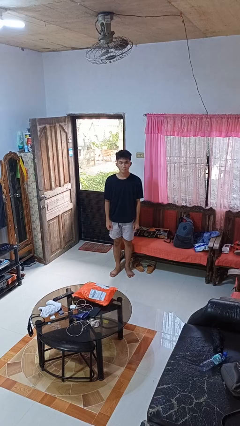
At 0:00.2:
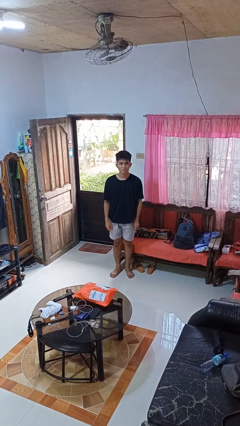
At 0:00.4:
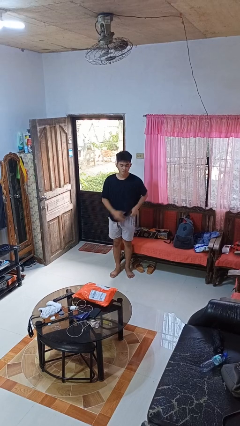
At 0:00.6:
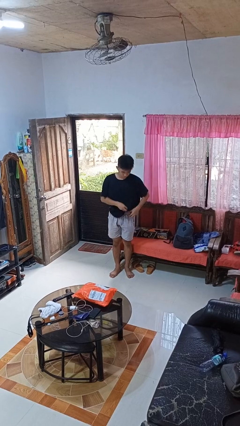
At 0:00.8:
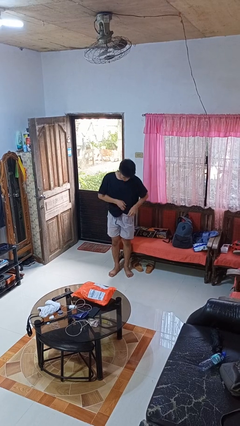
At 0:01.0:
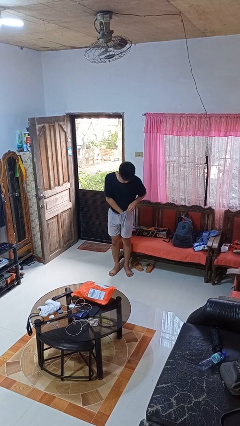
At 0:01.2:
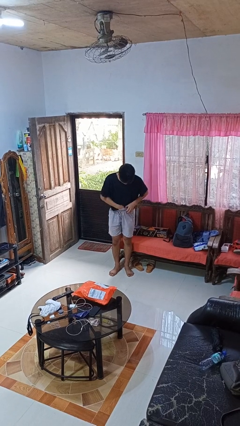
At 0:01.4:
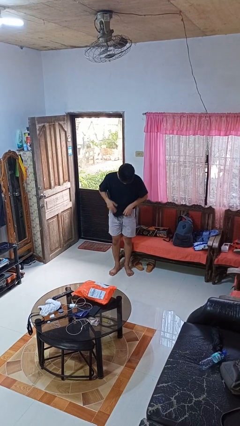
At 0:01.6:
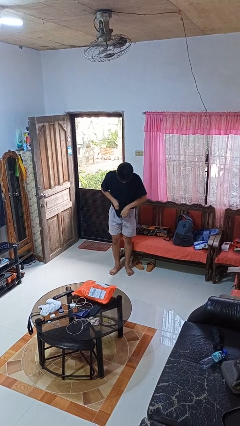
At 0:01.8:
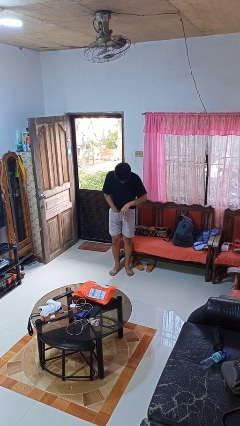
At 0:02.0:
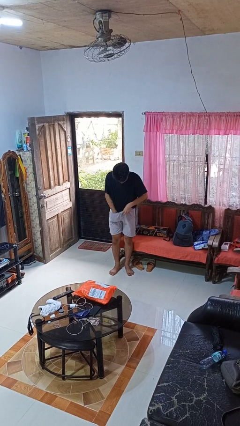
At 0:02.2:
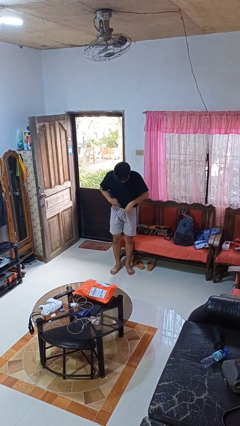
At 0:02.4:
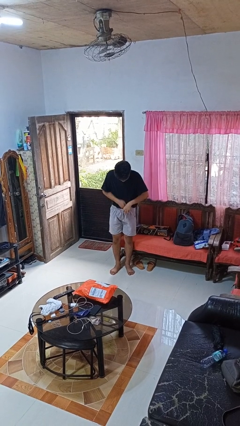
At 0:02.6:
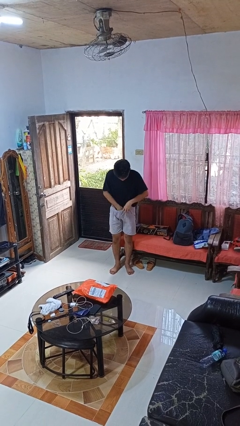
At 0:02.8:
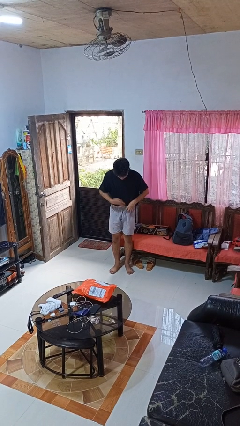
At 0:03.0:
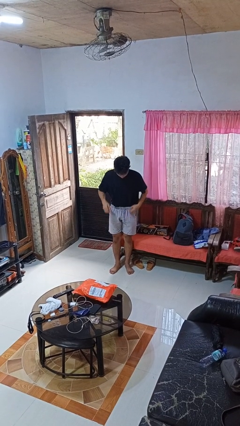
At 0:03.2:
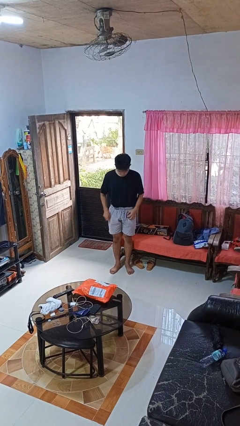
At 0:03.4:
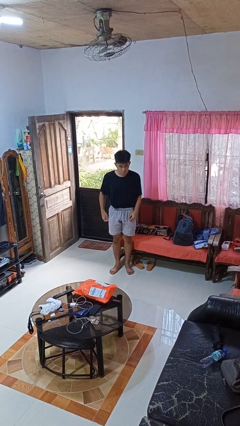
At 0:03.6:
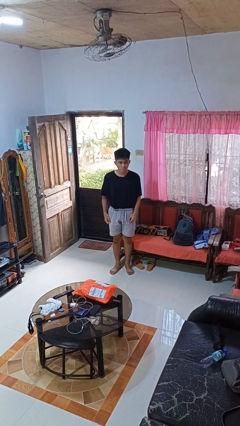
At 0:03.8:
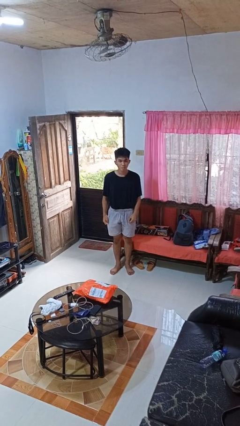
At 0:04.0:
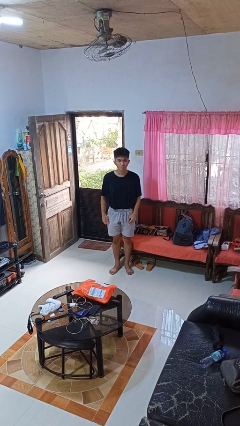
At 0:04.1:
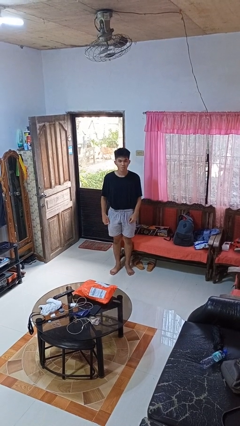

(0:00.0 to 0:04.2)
person tucks in shirt

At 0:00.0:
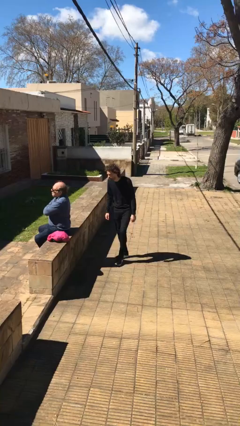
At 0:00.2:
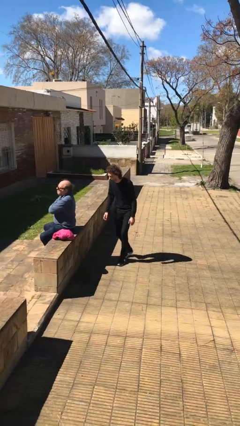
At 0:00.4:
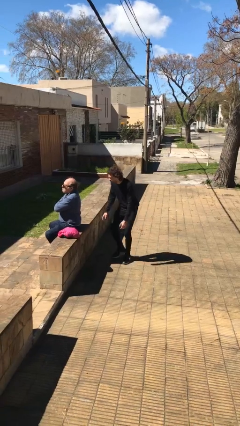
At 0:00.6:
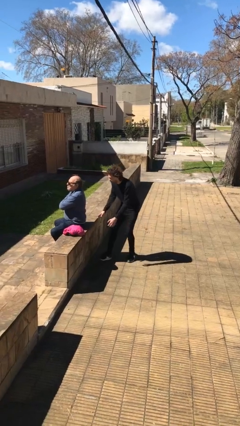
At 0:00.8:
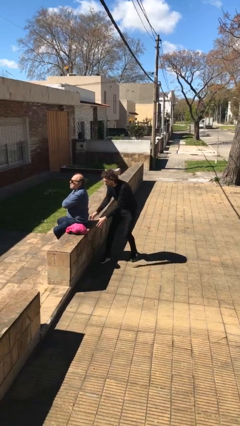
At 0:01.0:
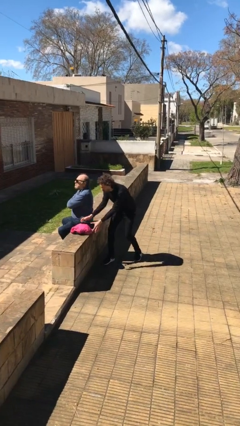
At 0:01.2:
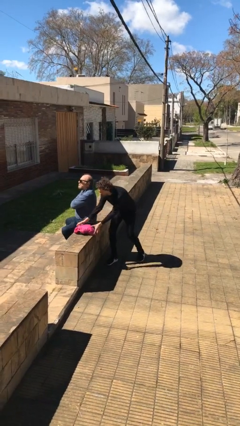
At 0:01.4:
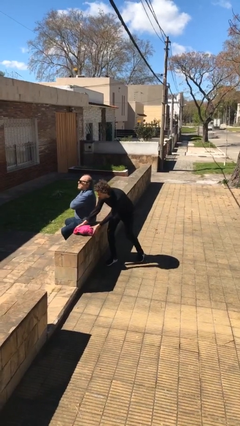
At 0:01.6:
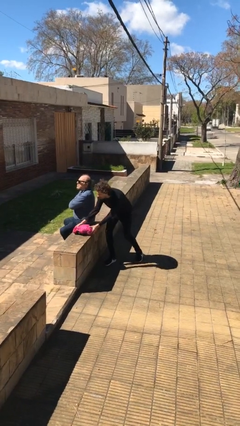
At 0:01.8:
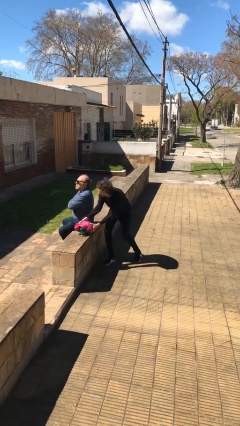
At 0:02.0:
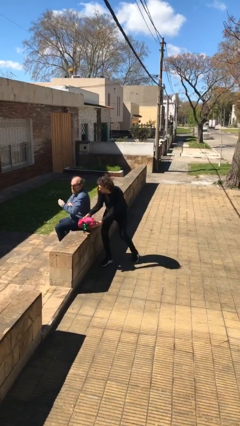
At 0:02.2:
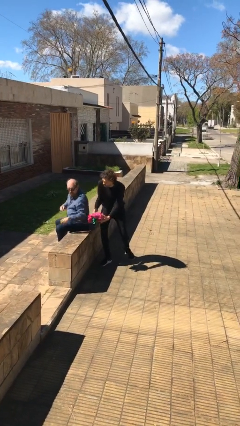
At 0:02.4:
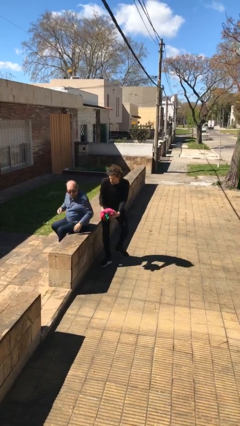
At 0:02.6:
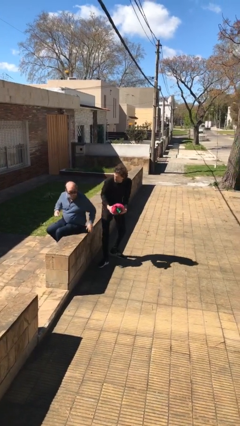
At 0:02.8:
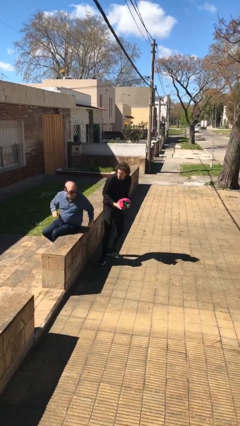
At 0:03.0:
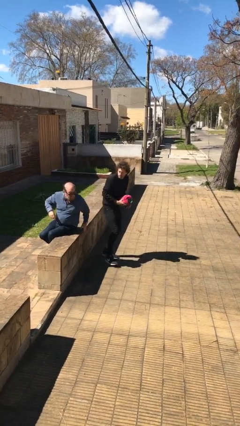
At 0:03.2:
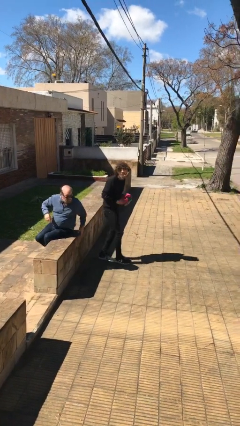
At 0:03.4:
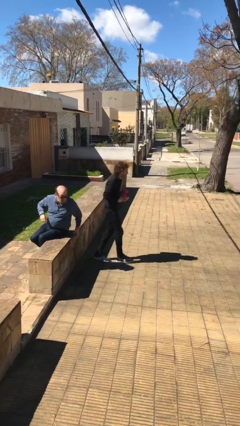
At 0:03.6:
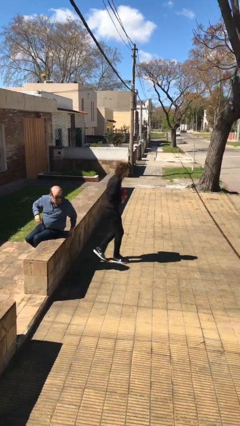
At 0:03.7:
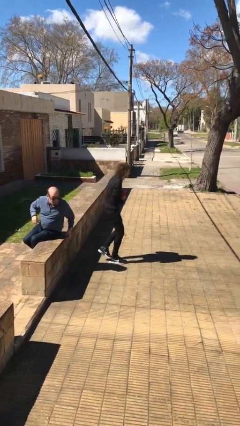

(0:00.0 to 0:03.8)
person steals object from person

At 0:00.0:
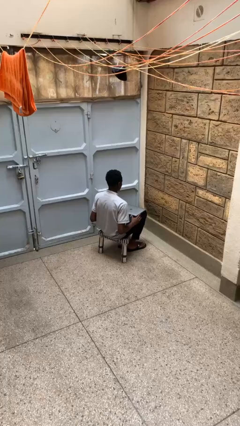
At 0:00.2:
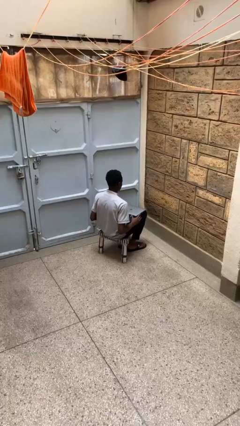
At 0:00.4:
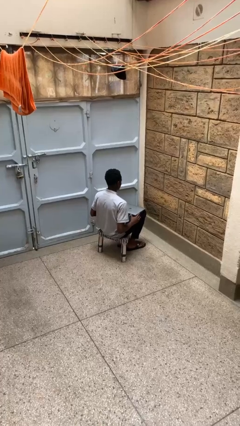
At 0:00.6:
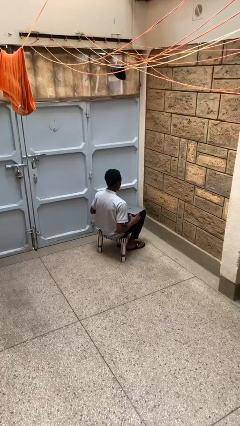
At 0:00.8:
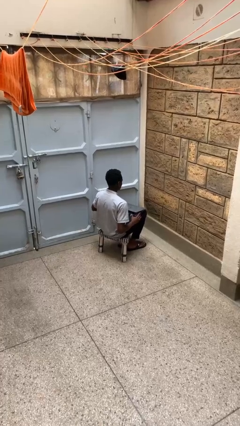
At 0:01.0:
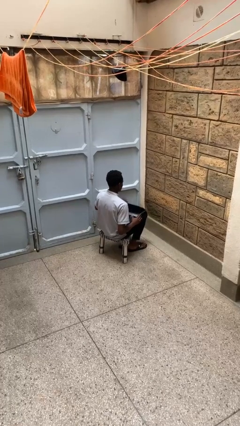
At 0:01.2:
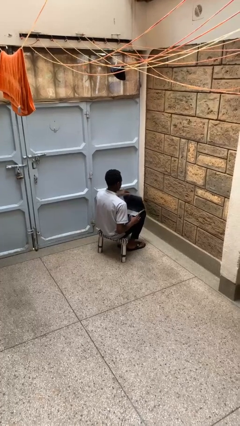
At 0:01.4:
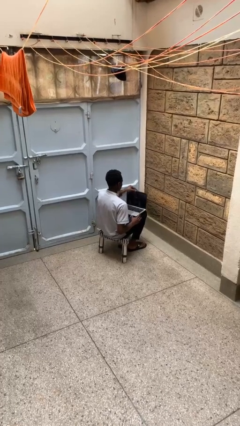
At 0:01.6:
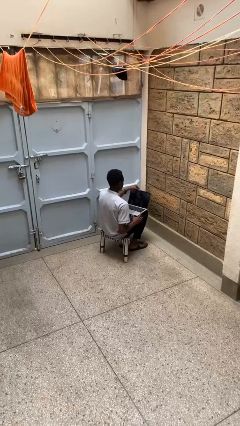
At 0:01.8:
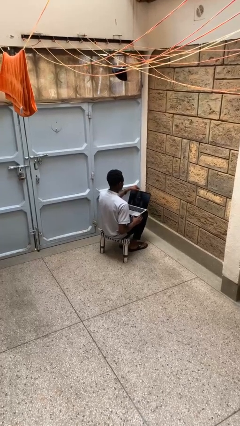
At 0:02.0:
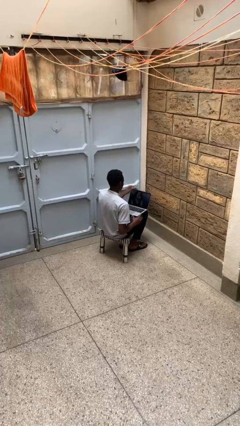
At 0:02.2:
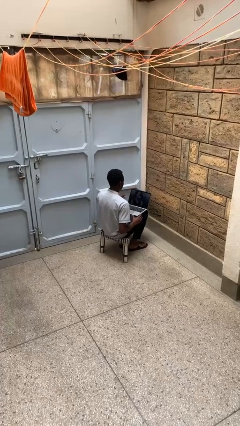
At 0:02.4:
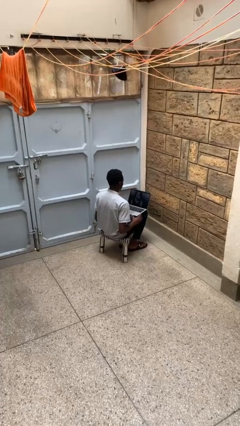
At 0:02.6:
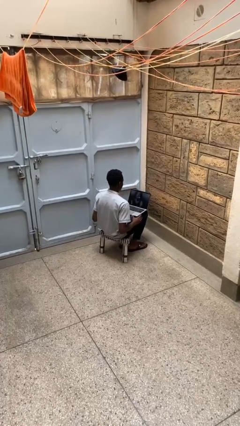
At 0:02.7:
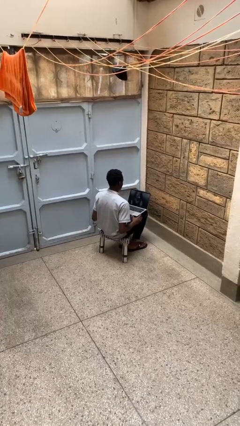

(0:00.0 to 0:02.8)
person opens laptop

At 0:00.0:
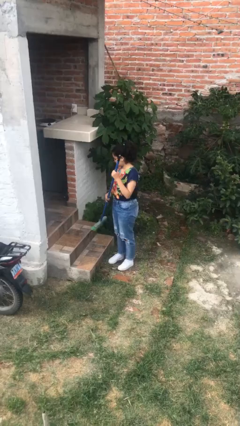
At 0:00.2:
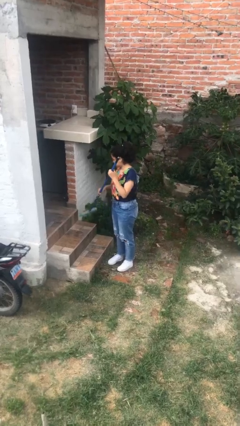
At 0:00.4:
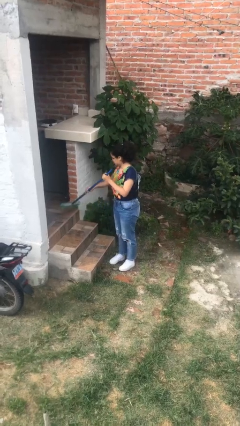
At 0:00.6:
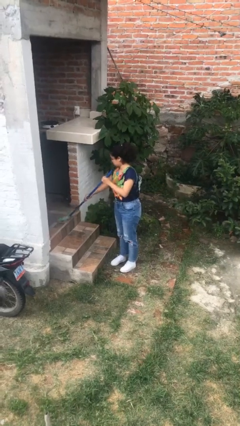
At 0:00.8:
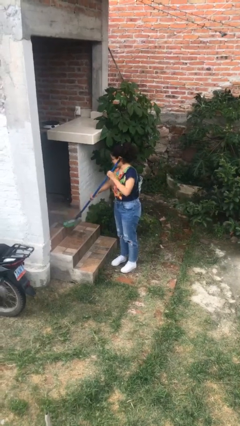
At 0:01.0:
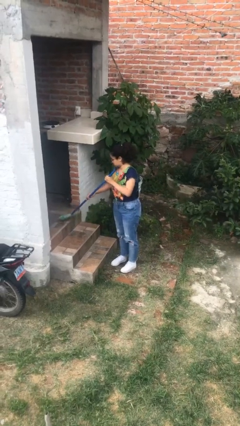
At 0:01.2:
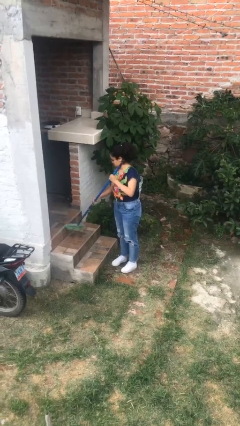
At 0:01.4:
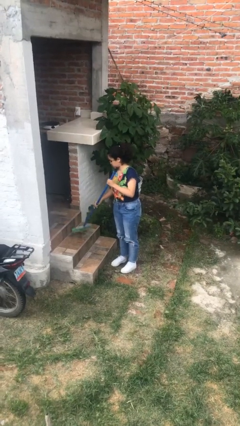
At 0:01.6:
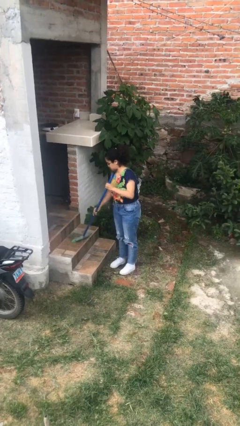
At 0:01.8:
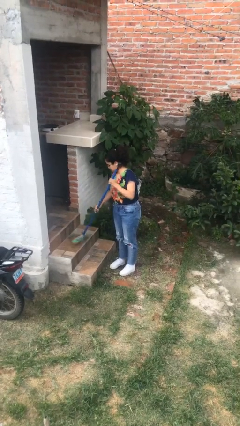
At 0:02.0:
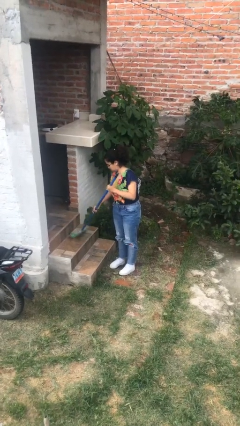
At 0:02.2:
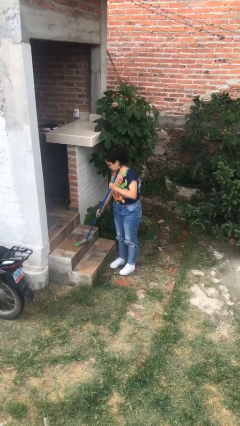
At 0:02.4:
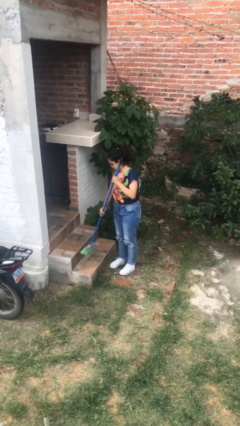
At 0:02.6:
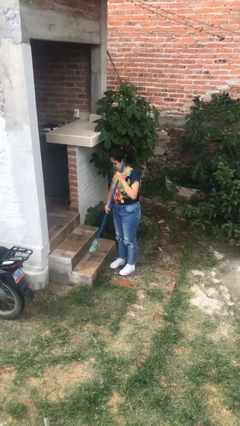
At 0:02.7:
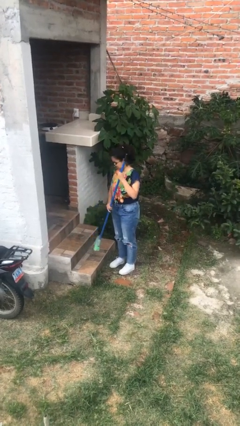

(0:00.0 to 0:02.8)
person sweeps floor

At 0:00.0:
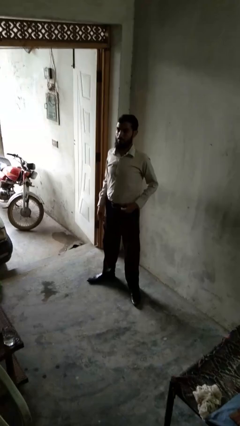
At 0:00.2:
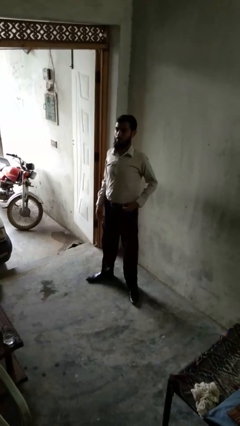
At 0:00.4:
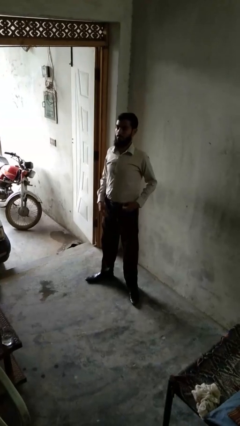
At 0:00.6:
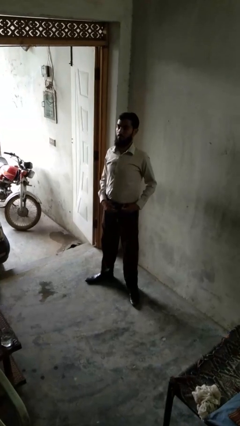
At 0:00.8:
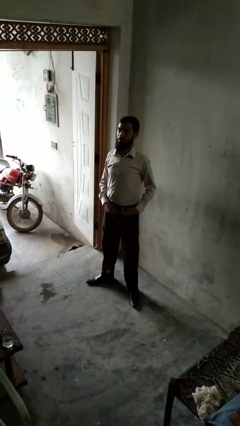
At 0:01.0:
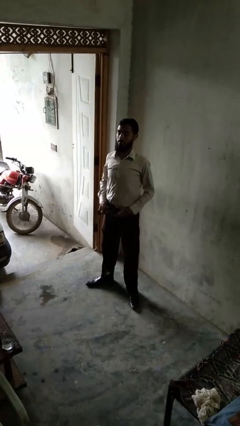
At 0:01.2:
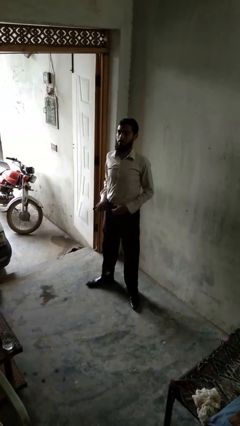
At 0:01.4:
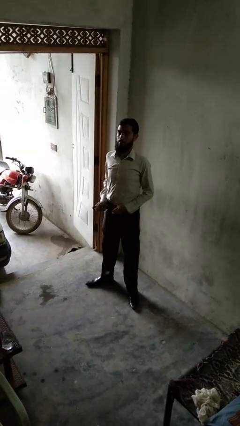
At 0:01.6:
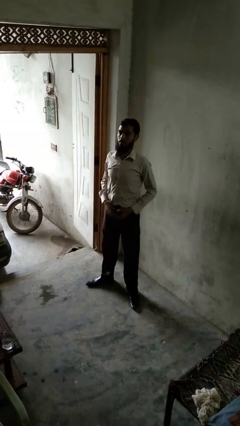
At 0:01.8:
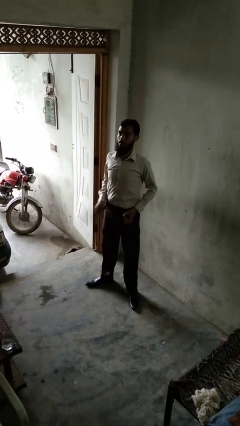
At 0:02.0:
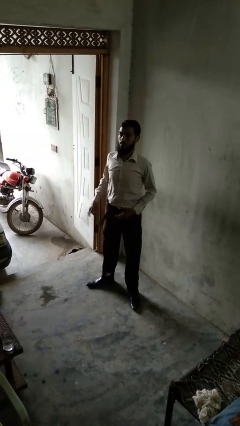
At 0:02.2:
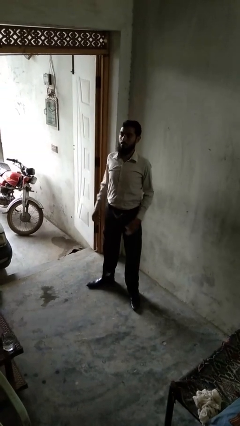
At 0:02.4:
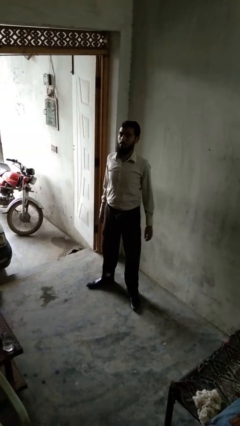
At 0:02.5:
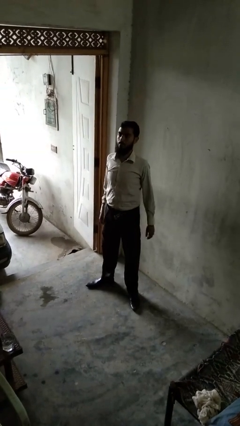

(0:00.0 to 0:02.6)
person takes off belt

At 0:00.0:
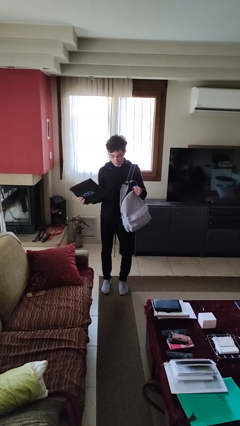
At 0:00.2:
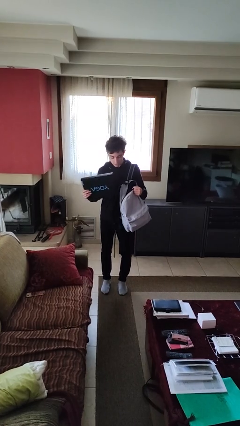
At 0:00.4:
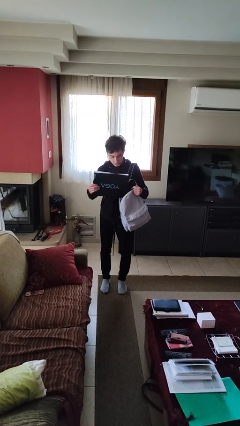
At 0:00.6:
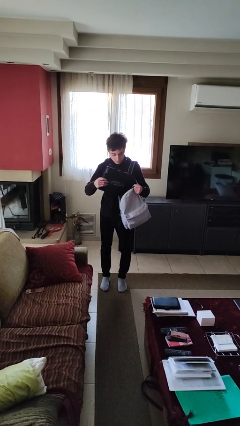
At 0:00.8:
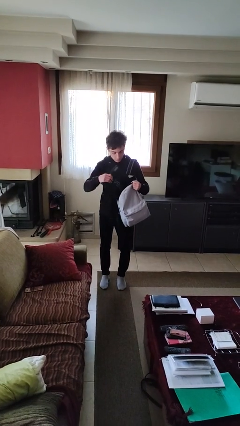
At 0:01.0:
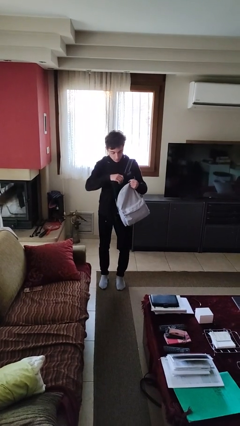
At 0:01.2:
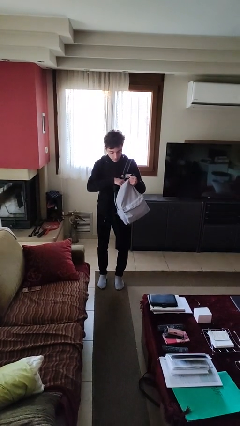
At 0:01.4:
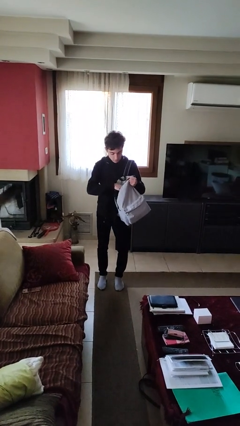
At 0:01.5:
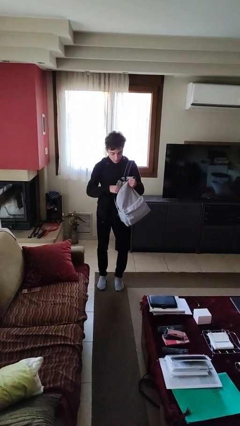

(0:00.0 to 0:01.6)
person puts object into backpack
